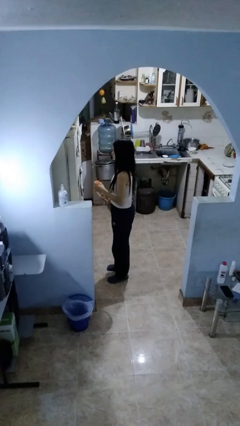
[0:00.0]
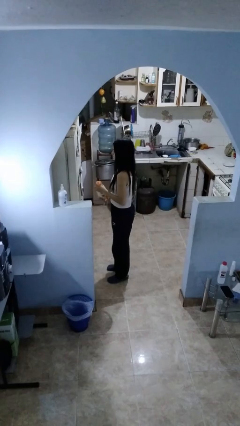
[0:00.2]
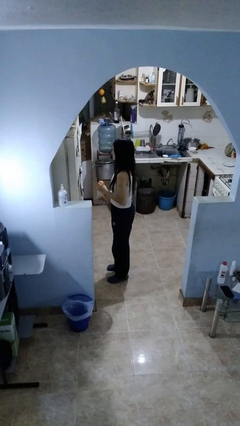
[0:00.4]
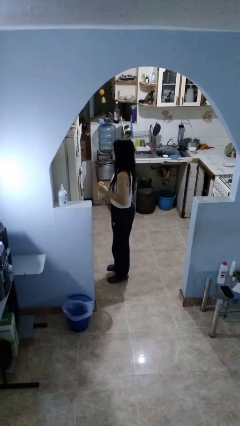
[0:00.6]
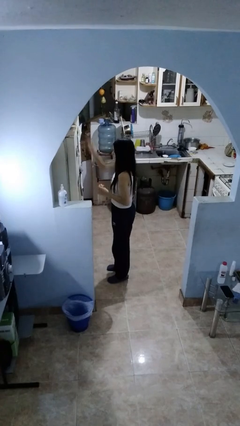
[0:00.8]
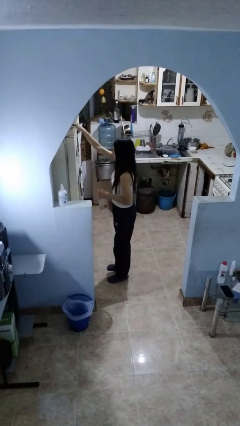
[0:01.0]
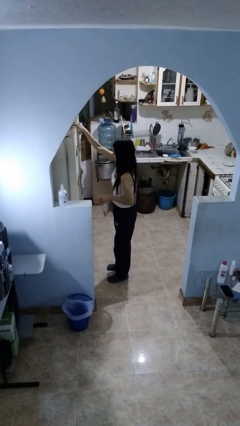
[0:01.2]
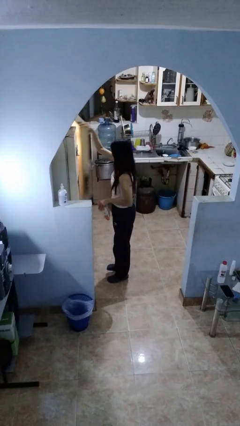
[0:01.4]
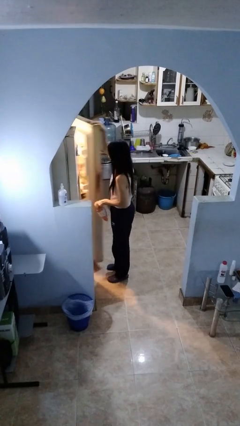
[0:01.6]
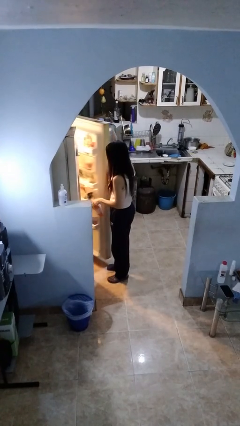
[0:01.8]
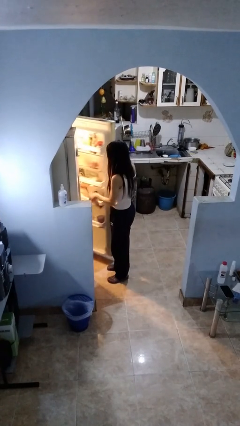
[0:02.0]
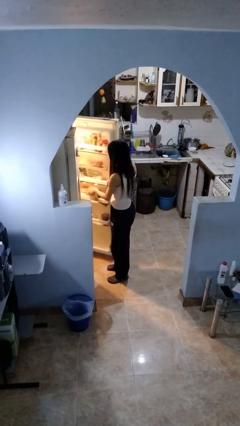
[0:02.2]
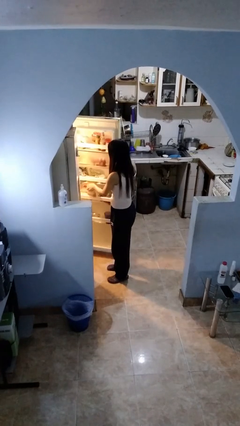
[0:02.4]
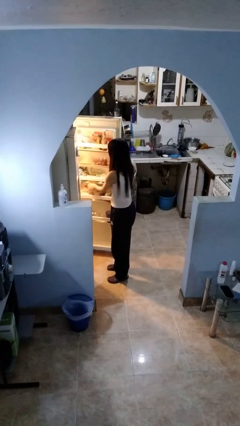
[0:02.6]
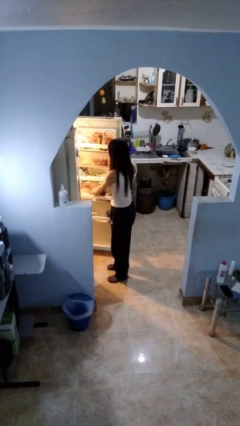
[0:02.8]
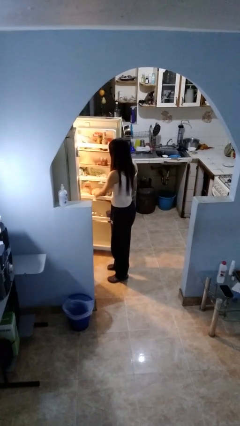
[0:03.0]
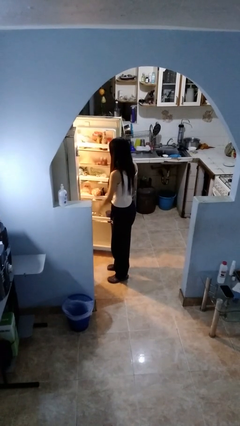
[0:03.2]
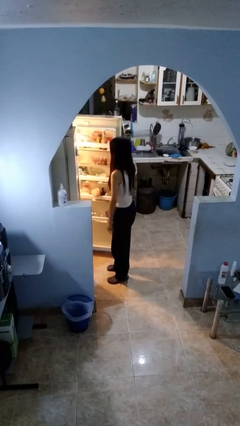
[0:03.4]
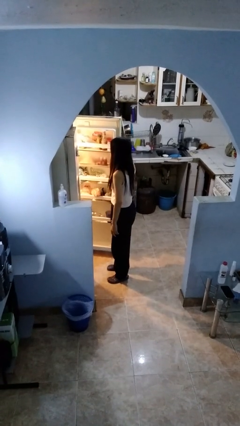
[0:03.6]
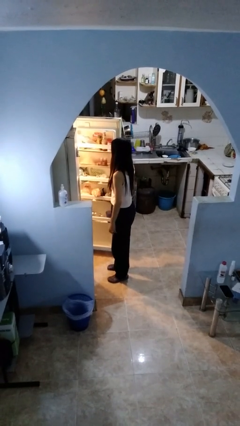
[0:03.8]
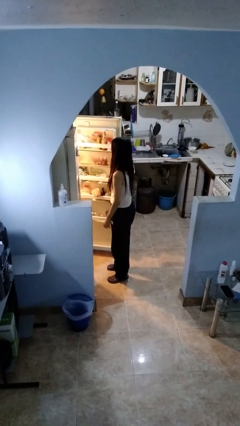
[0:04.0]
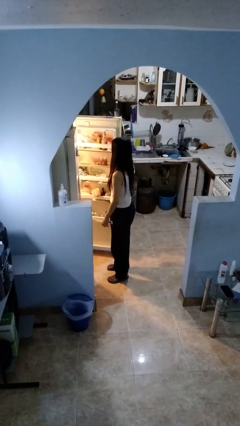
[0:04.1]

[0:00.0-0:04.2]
person puts object into refrigerator

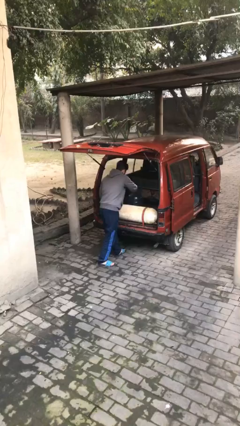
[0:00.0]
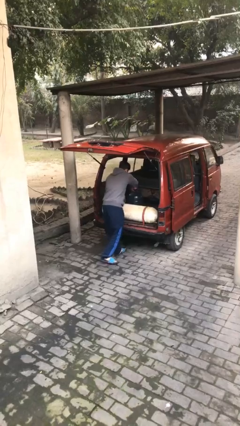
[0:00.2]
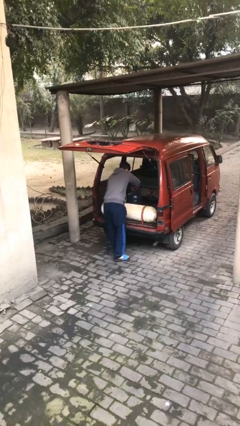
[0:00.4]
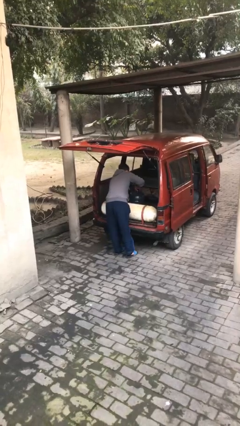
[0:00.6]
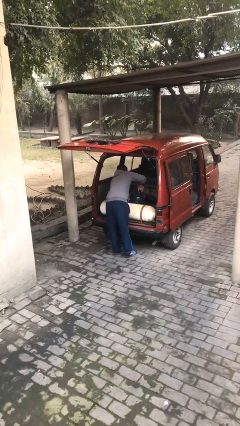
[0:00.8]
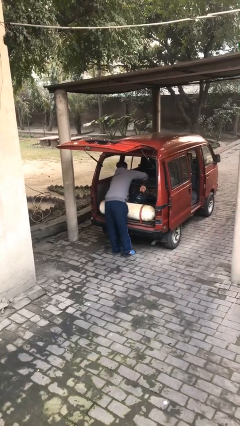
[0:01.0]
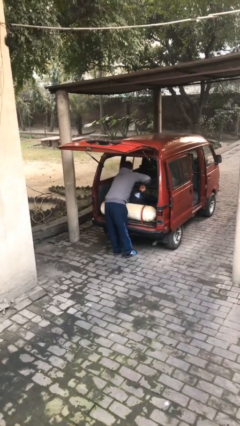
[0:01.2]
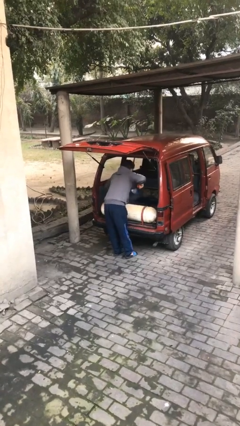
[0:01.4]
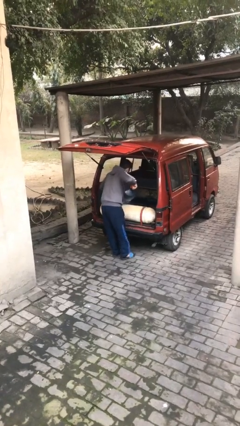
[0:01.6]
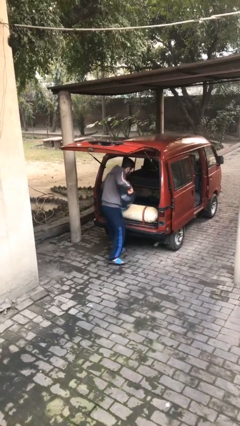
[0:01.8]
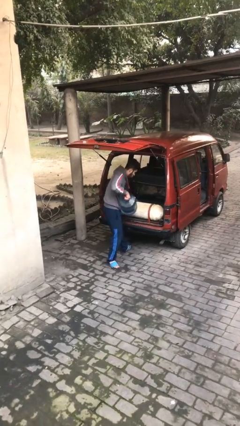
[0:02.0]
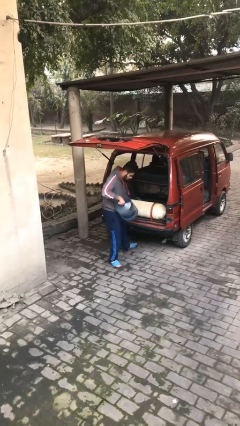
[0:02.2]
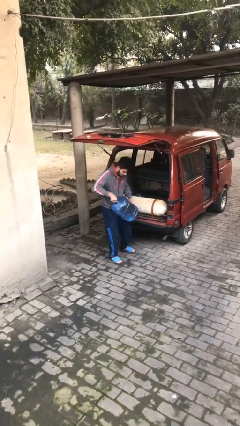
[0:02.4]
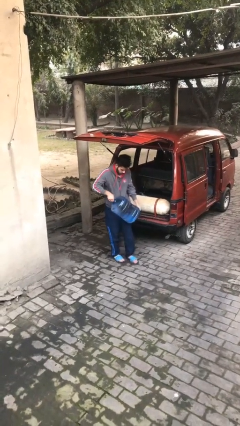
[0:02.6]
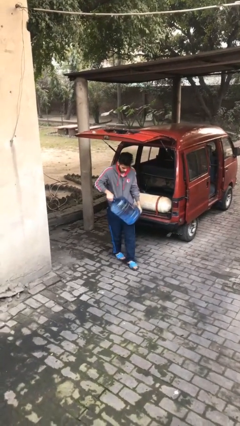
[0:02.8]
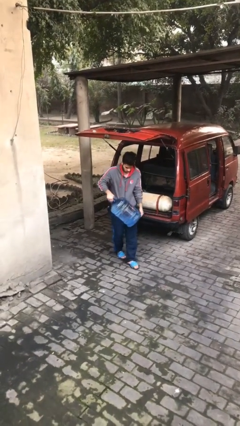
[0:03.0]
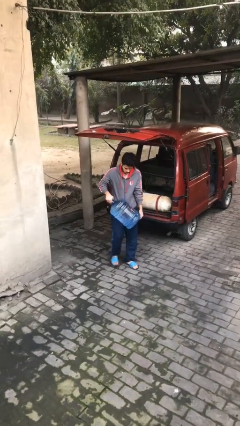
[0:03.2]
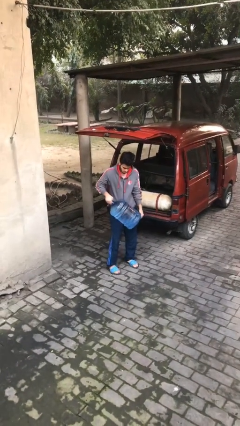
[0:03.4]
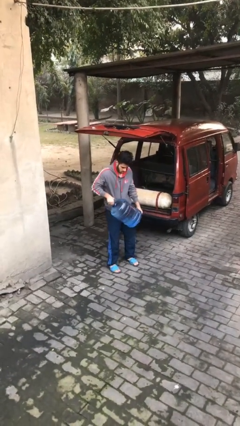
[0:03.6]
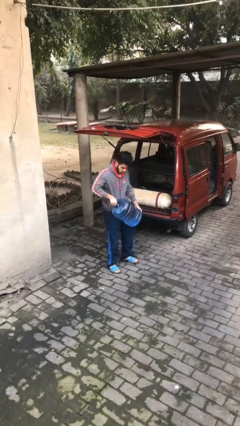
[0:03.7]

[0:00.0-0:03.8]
person unloads car

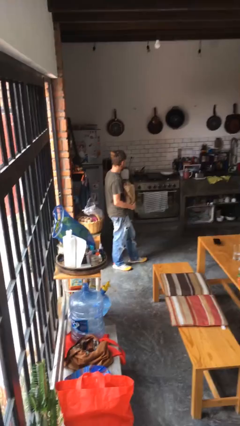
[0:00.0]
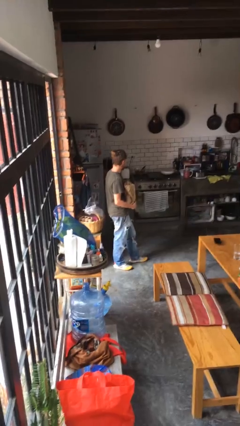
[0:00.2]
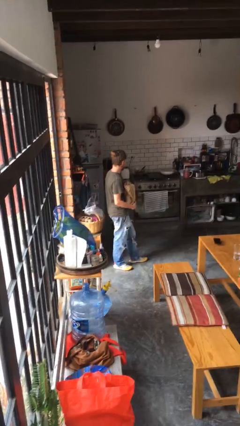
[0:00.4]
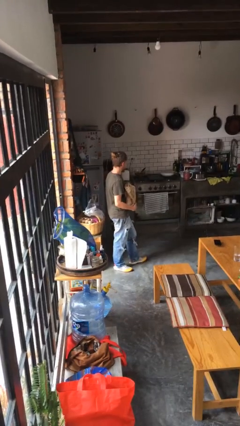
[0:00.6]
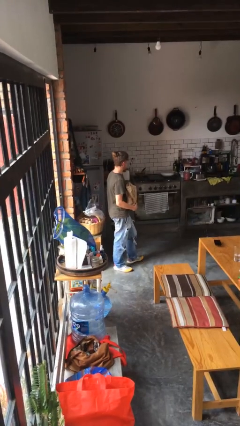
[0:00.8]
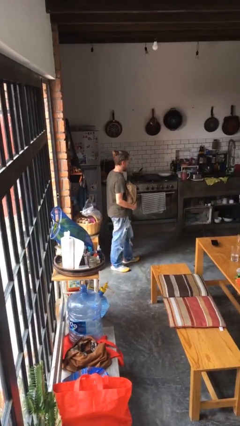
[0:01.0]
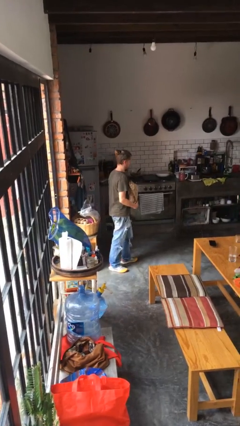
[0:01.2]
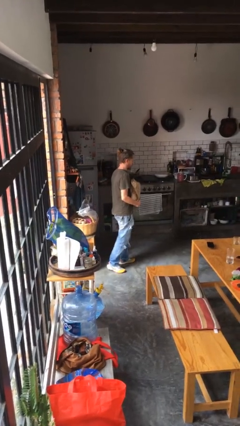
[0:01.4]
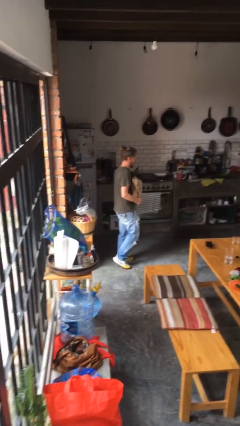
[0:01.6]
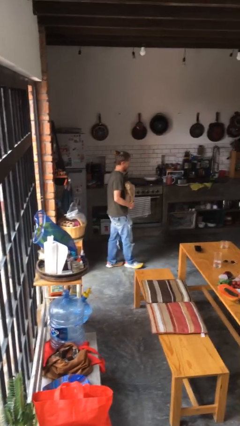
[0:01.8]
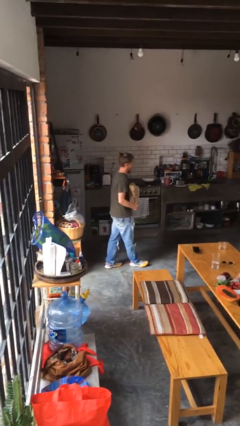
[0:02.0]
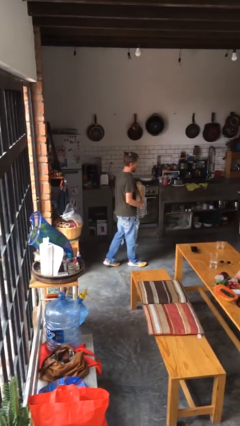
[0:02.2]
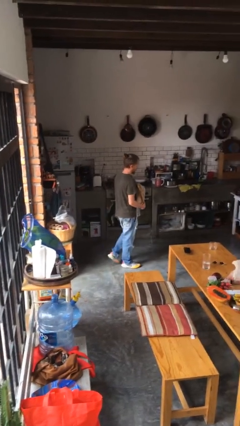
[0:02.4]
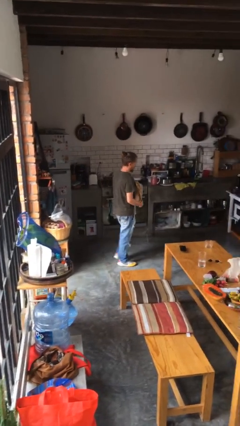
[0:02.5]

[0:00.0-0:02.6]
person carries groceries

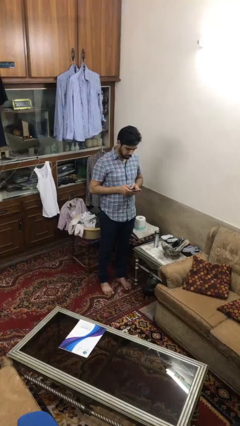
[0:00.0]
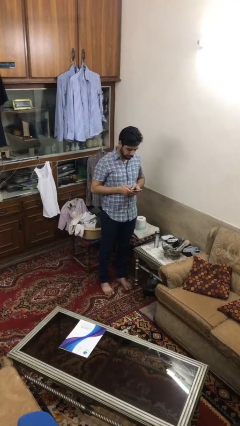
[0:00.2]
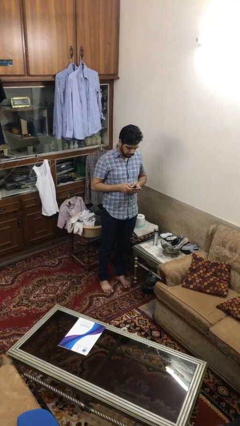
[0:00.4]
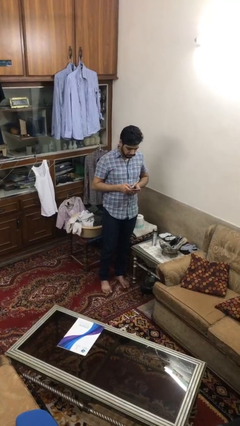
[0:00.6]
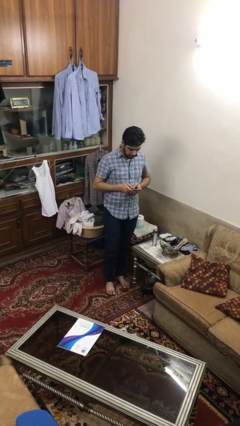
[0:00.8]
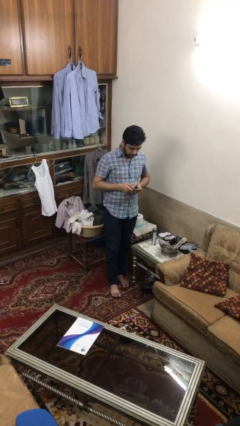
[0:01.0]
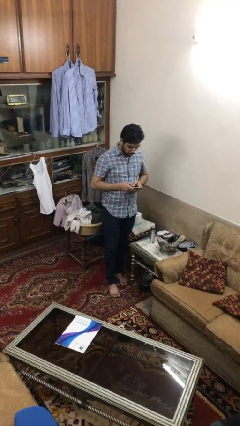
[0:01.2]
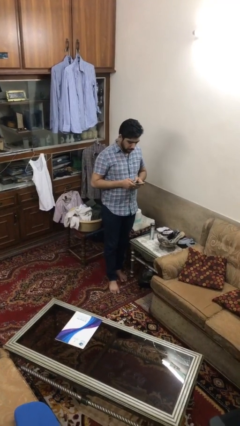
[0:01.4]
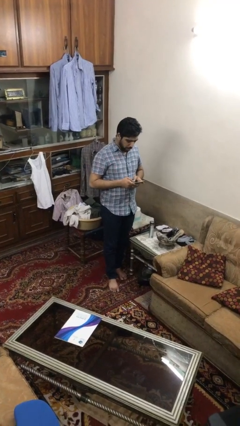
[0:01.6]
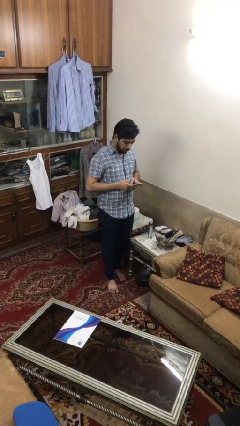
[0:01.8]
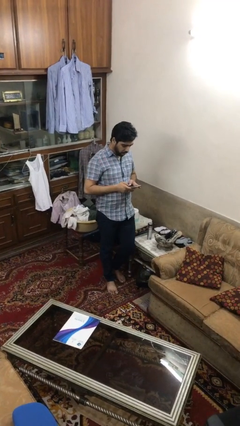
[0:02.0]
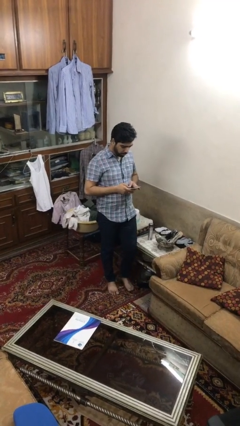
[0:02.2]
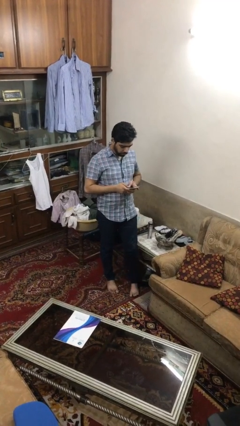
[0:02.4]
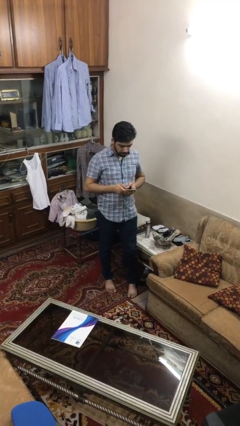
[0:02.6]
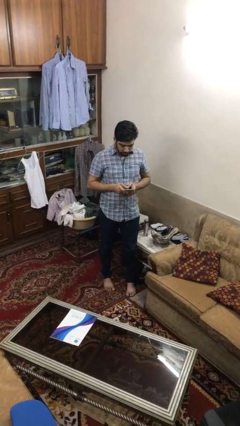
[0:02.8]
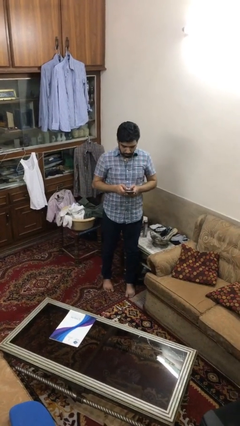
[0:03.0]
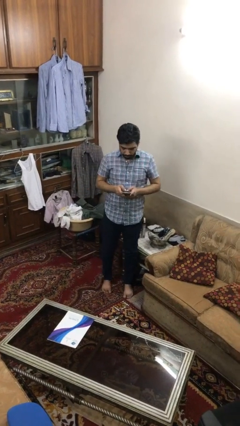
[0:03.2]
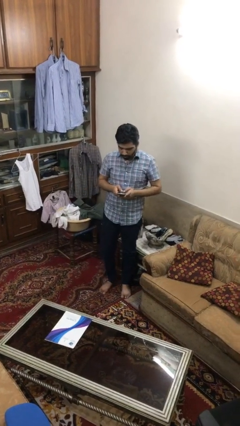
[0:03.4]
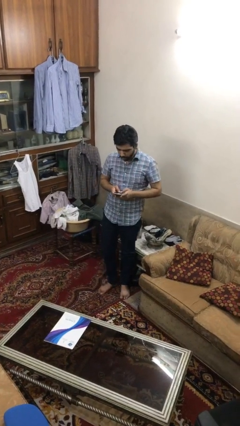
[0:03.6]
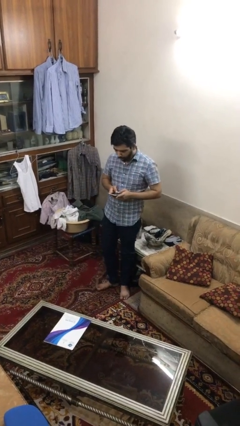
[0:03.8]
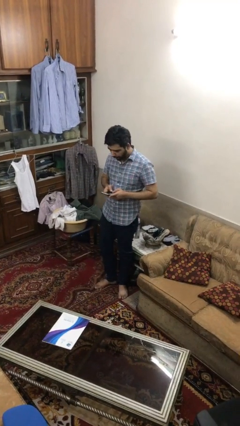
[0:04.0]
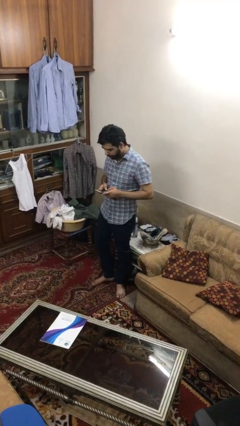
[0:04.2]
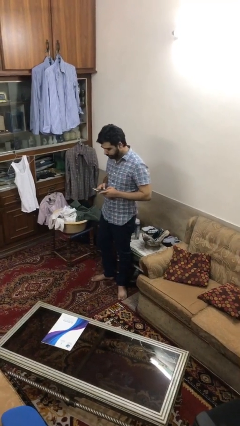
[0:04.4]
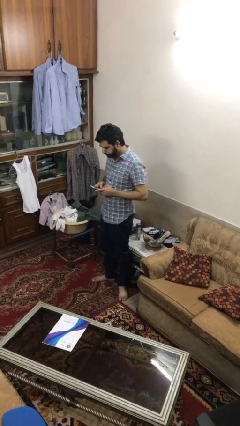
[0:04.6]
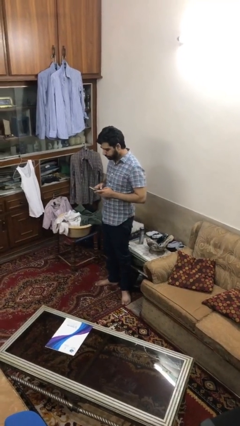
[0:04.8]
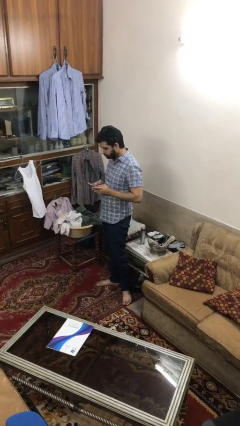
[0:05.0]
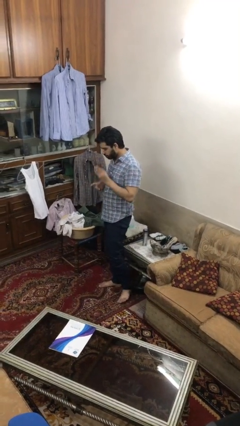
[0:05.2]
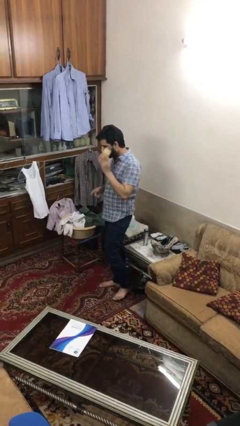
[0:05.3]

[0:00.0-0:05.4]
person texts on phone

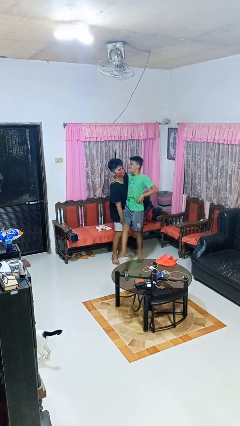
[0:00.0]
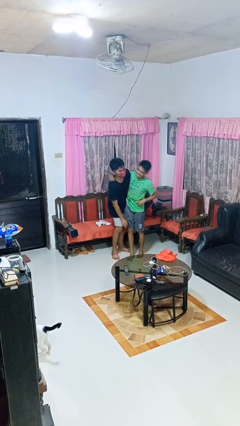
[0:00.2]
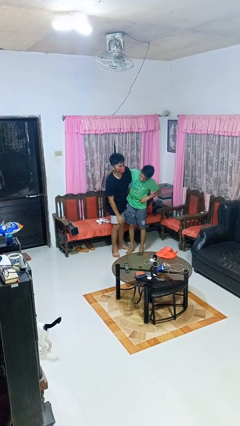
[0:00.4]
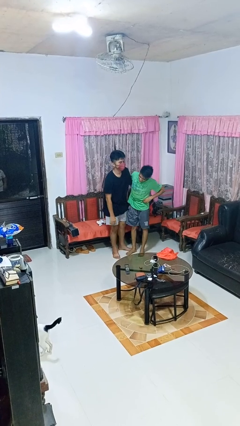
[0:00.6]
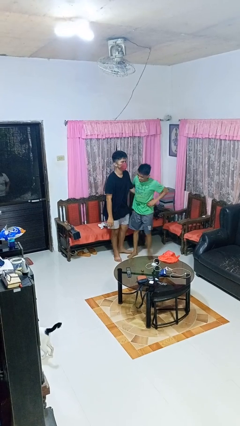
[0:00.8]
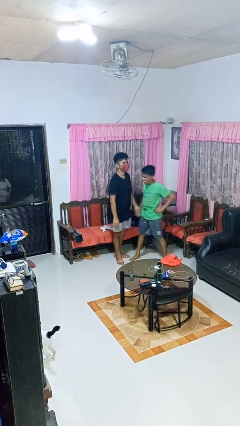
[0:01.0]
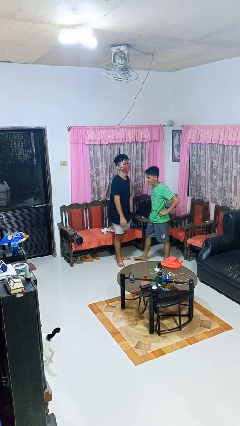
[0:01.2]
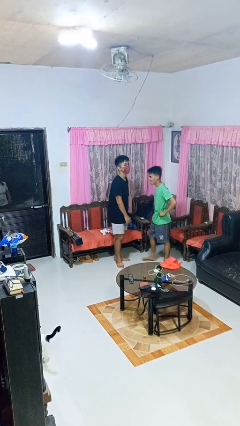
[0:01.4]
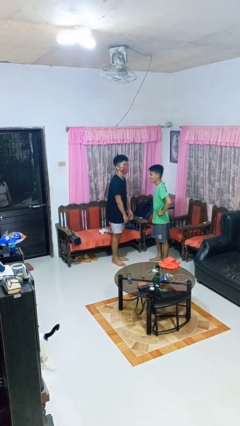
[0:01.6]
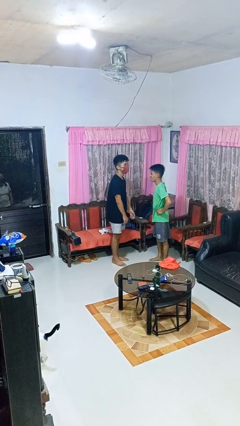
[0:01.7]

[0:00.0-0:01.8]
person puts down person
